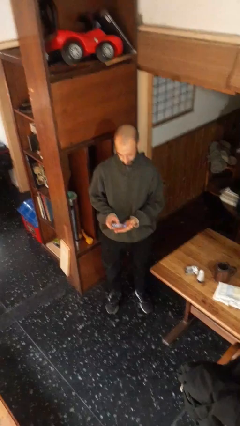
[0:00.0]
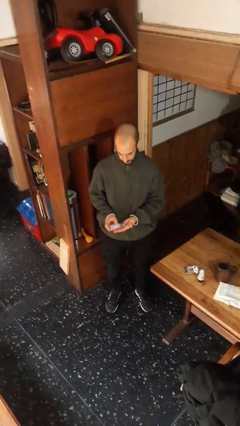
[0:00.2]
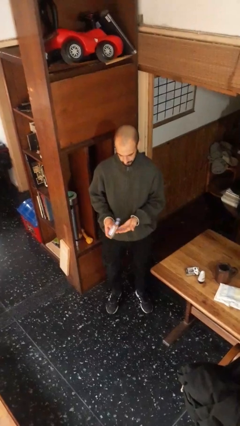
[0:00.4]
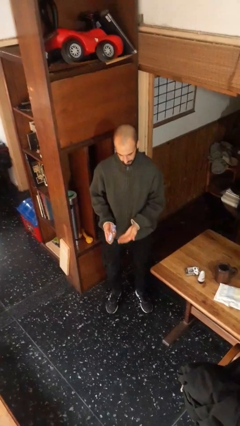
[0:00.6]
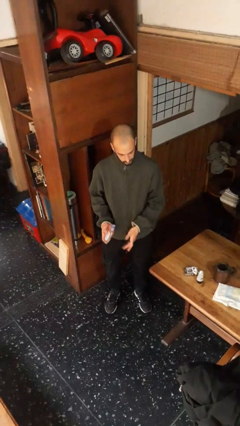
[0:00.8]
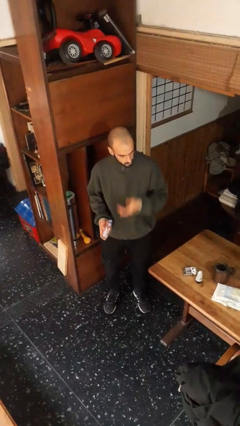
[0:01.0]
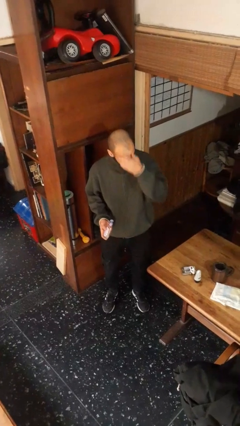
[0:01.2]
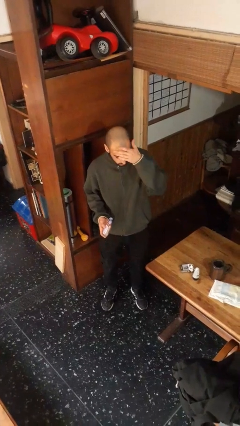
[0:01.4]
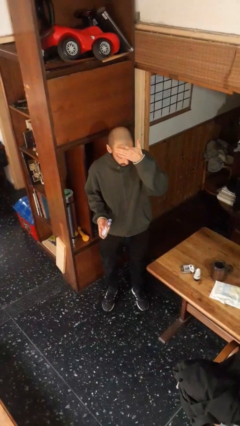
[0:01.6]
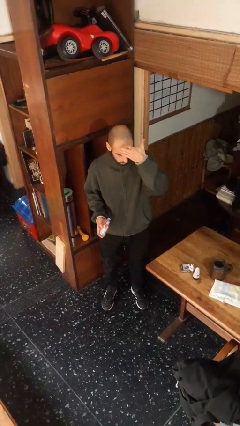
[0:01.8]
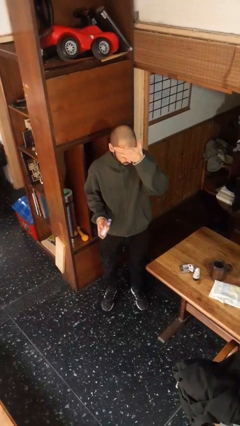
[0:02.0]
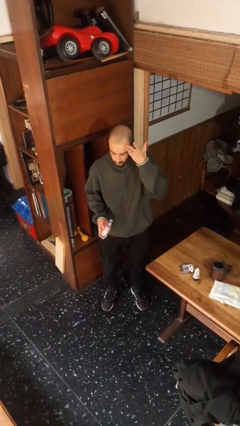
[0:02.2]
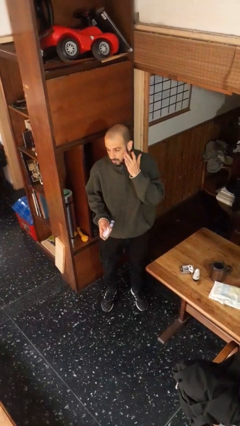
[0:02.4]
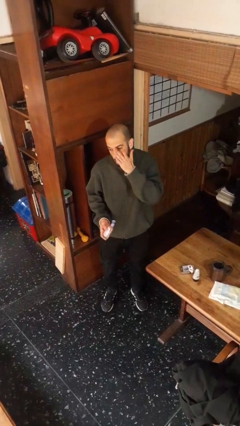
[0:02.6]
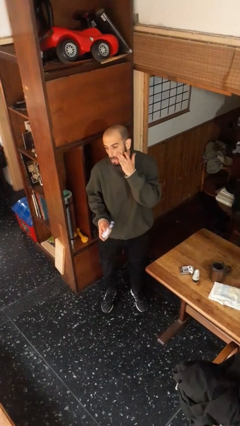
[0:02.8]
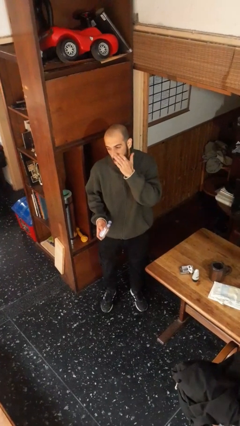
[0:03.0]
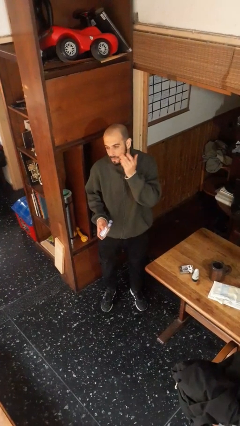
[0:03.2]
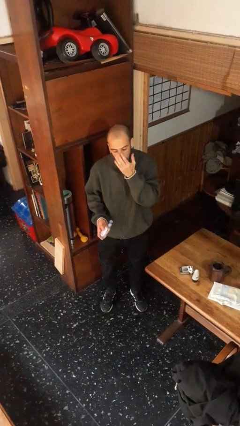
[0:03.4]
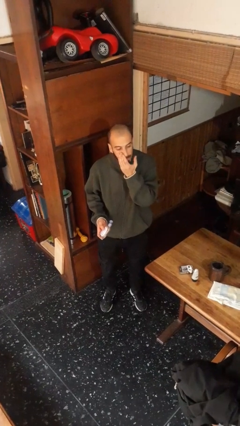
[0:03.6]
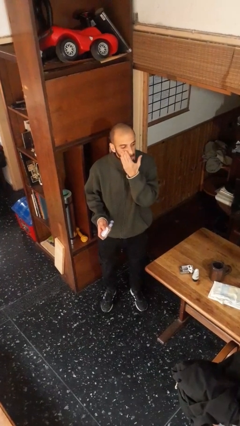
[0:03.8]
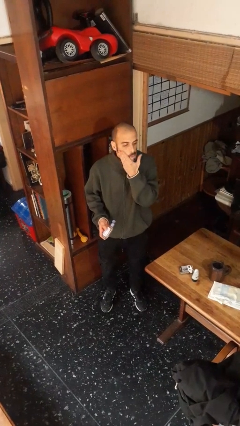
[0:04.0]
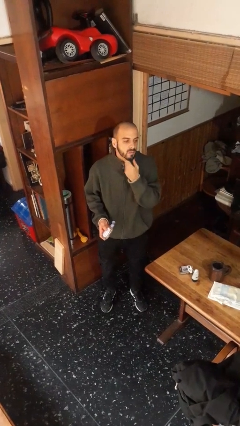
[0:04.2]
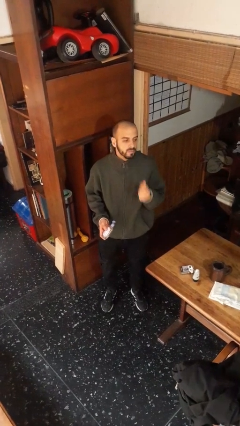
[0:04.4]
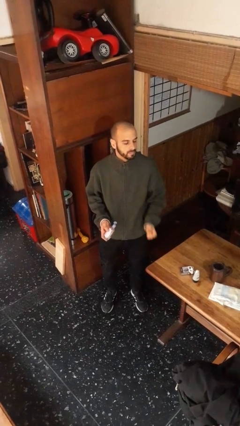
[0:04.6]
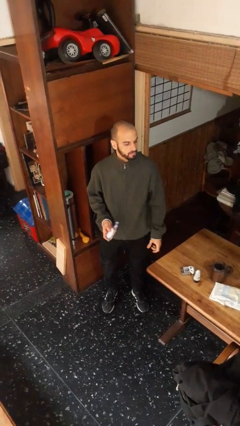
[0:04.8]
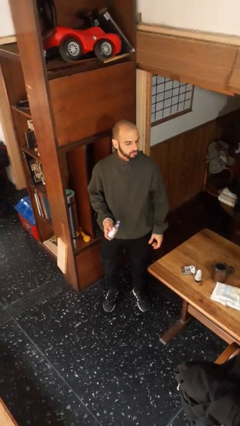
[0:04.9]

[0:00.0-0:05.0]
person applies facial moisturizer

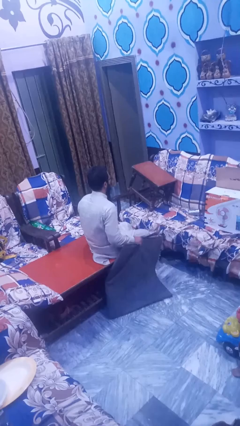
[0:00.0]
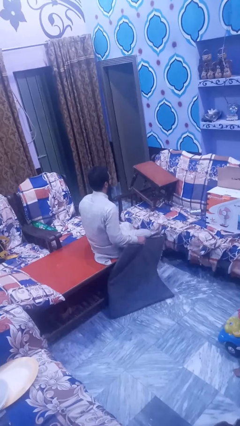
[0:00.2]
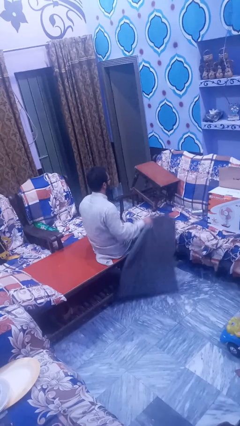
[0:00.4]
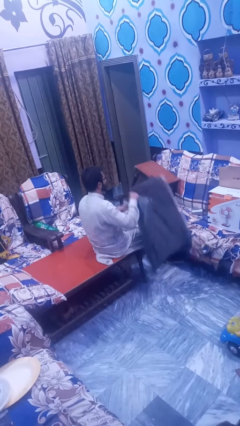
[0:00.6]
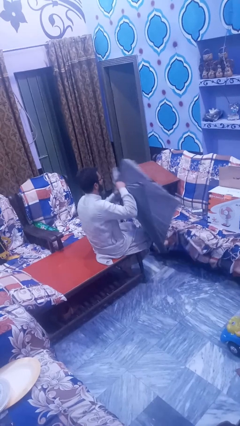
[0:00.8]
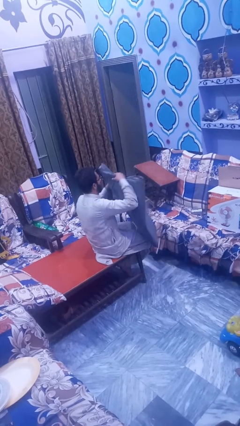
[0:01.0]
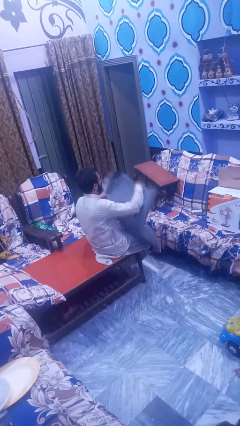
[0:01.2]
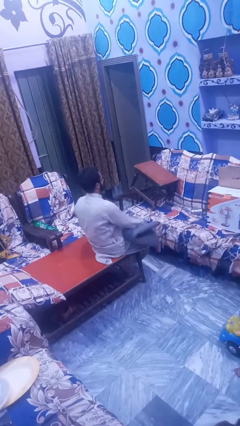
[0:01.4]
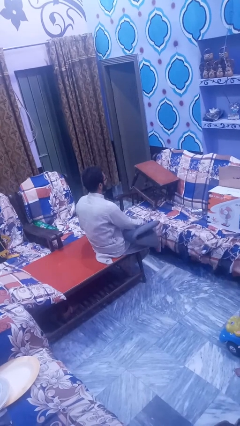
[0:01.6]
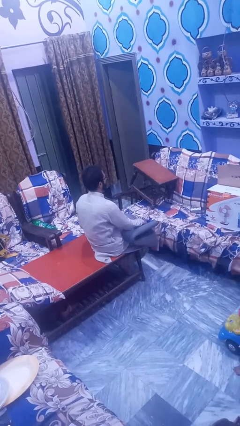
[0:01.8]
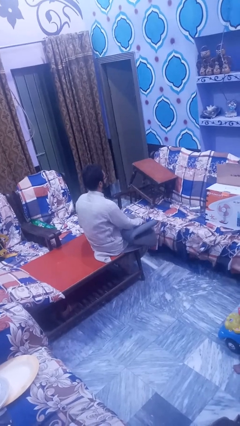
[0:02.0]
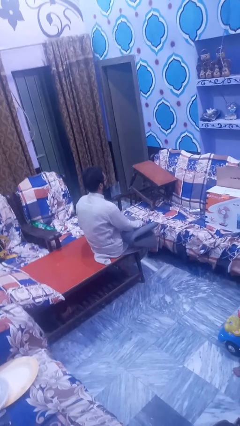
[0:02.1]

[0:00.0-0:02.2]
person folds blanket

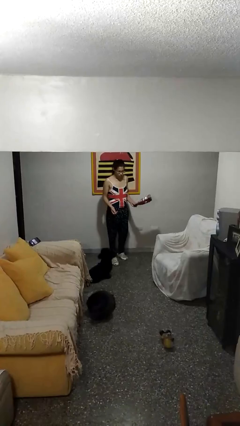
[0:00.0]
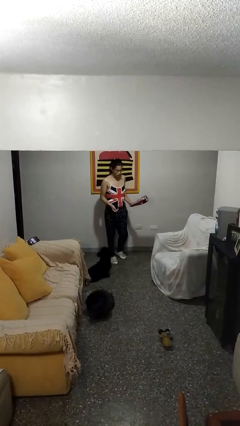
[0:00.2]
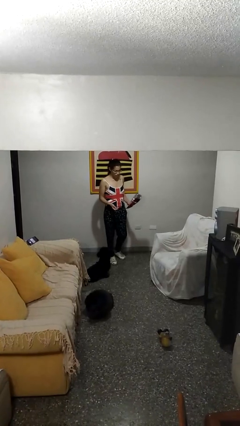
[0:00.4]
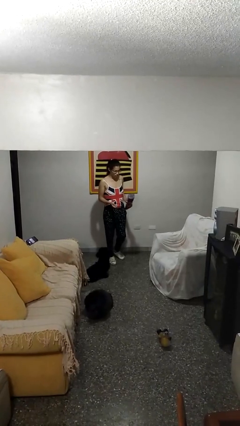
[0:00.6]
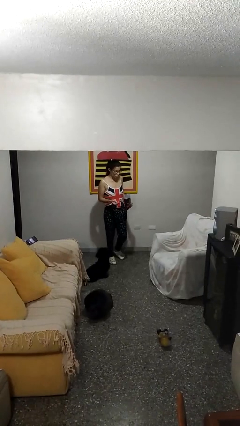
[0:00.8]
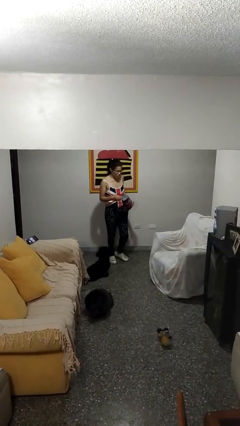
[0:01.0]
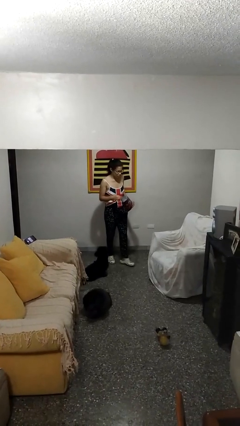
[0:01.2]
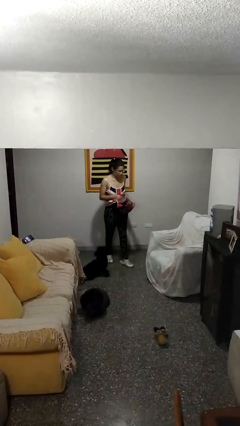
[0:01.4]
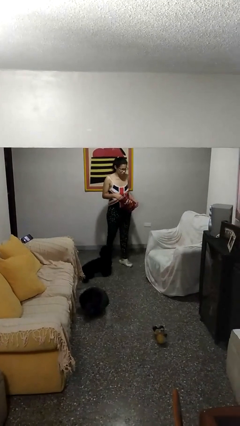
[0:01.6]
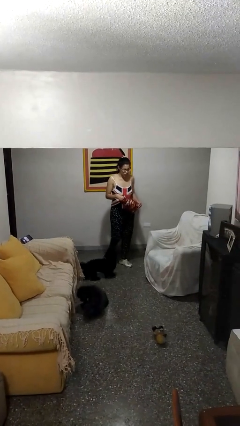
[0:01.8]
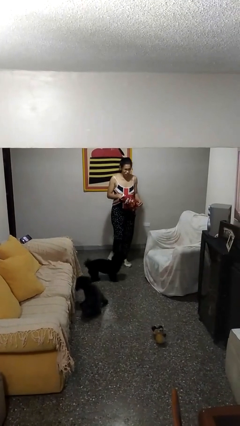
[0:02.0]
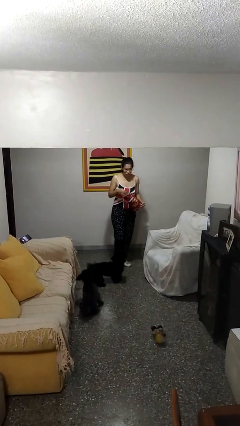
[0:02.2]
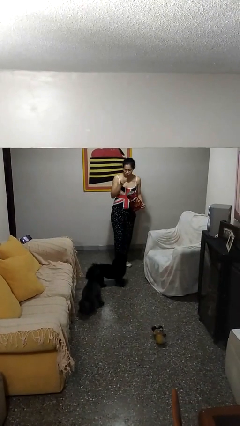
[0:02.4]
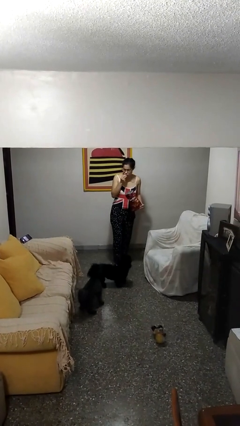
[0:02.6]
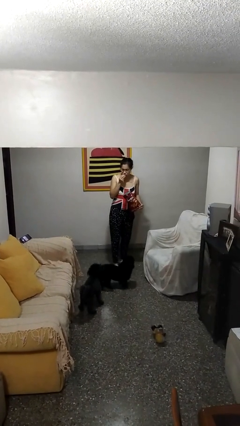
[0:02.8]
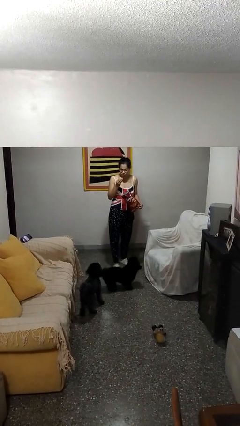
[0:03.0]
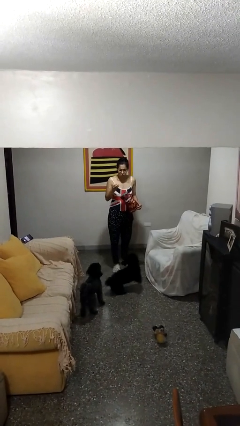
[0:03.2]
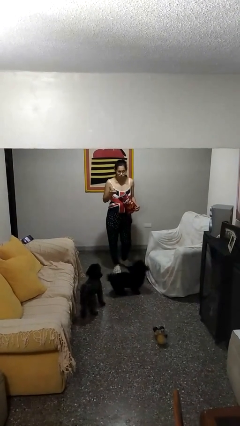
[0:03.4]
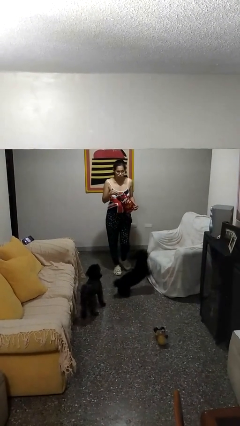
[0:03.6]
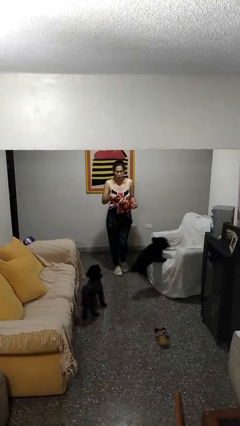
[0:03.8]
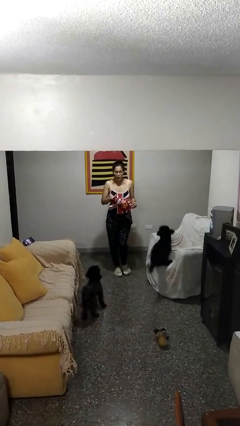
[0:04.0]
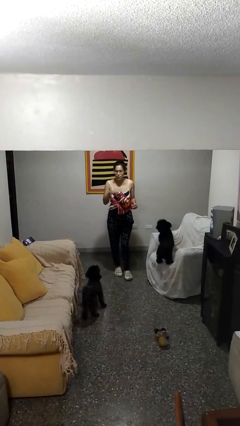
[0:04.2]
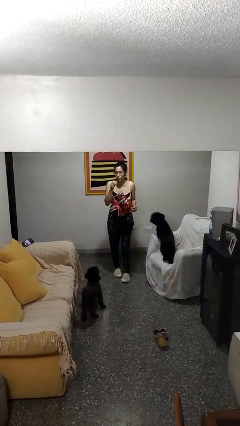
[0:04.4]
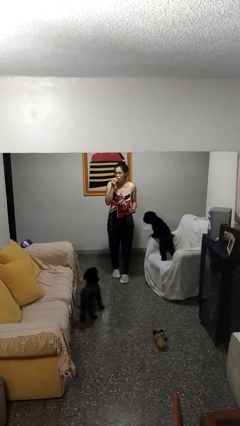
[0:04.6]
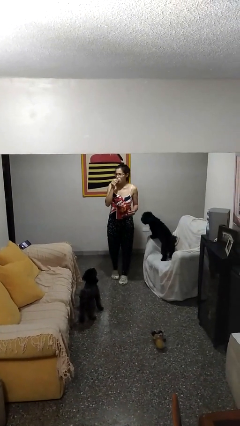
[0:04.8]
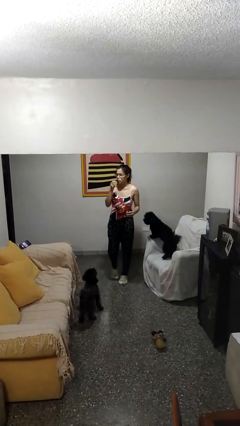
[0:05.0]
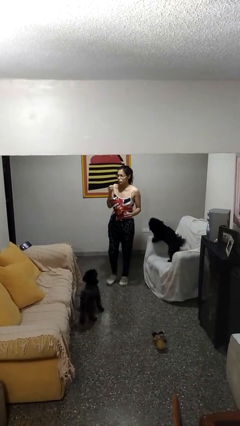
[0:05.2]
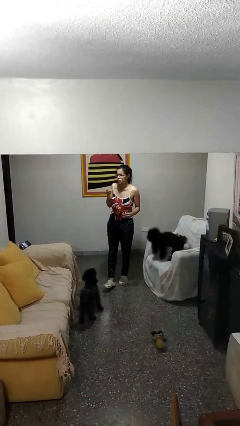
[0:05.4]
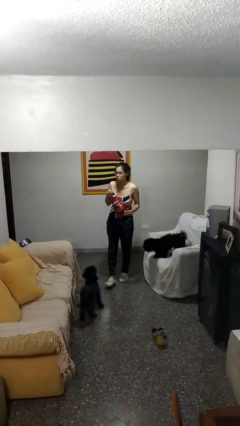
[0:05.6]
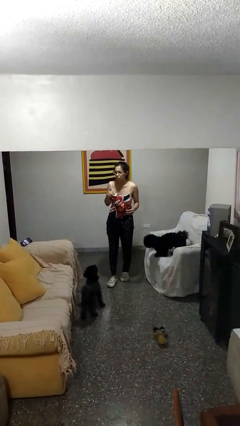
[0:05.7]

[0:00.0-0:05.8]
person eats snack from bag

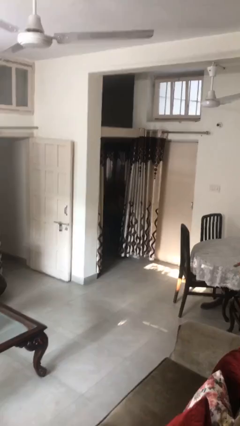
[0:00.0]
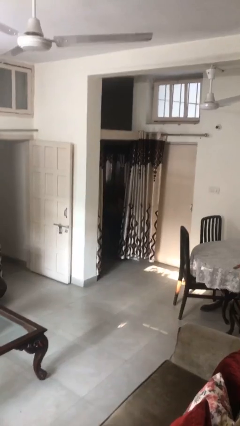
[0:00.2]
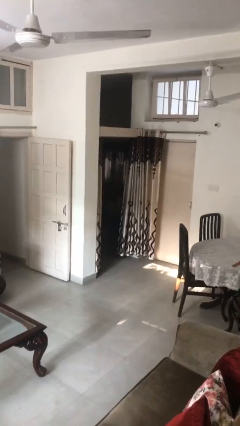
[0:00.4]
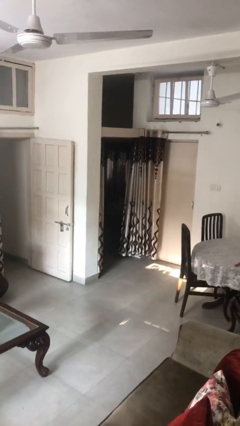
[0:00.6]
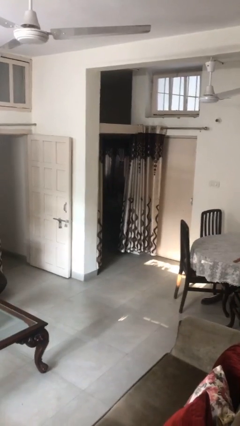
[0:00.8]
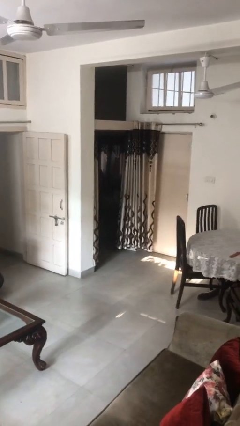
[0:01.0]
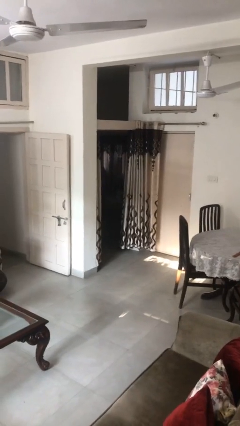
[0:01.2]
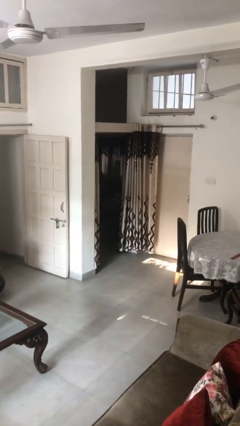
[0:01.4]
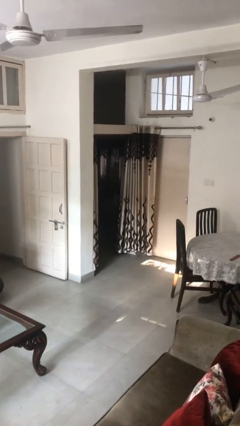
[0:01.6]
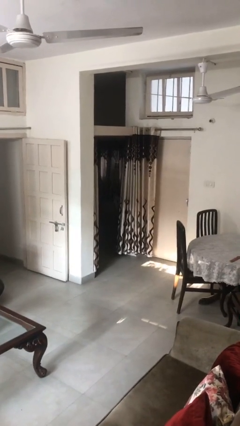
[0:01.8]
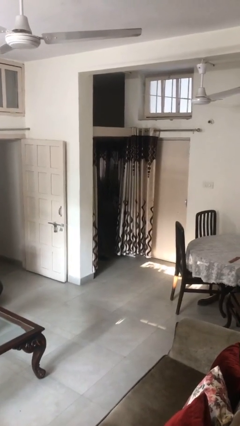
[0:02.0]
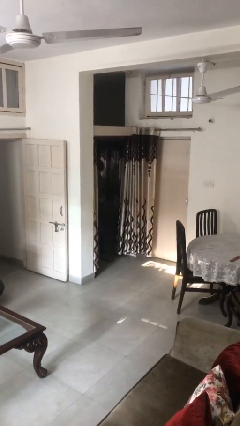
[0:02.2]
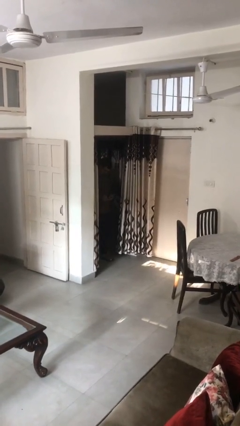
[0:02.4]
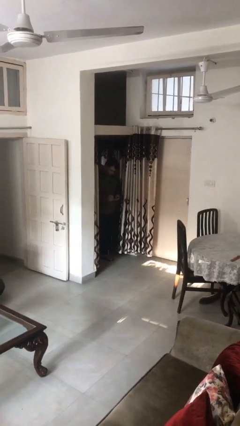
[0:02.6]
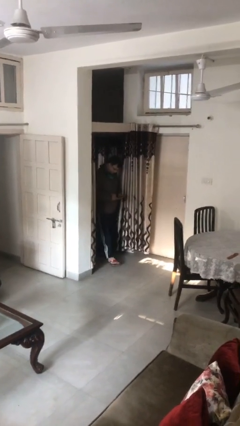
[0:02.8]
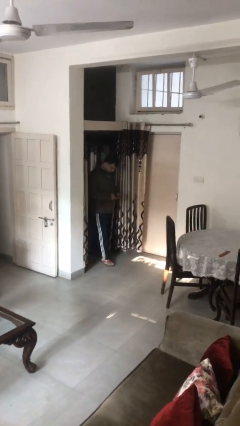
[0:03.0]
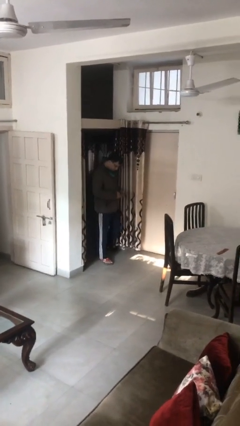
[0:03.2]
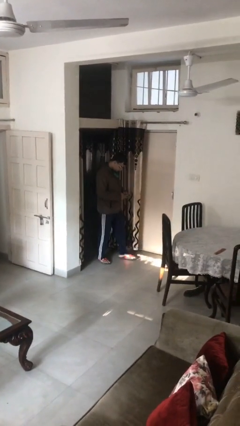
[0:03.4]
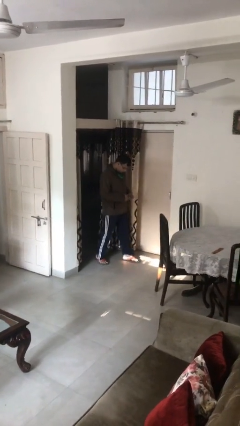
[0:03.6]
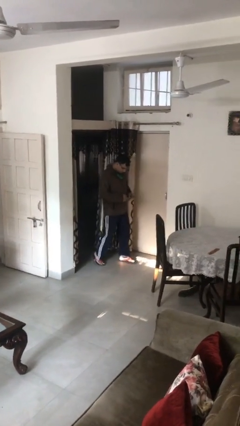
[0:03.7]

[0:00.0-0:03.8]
person enters scene through structure

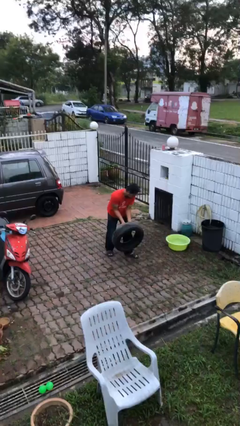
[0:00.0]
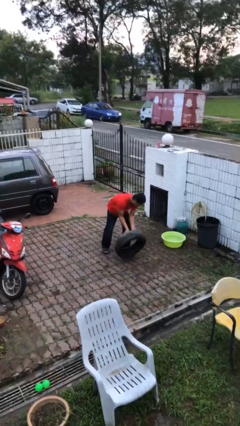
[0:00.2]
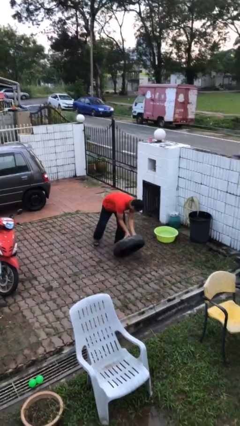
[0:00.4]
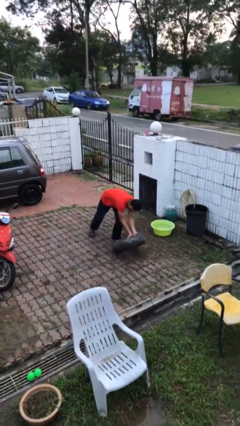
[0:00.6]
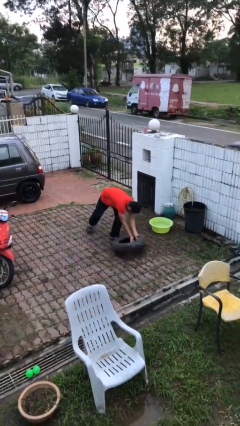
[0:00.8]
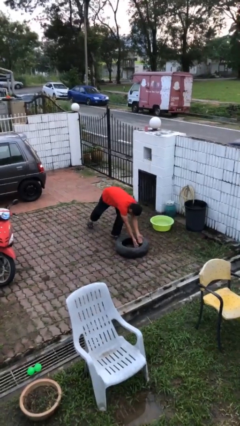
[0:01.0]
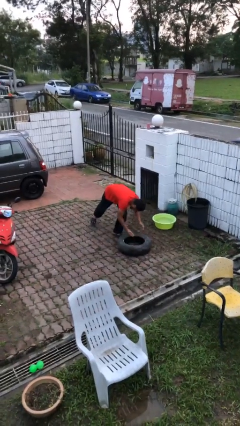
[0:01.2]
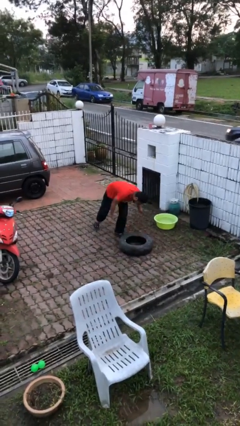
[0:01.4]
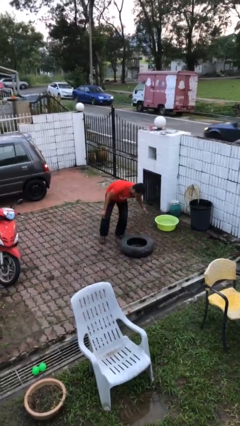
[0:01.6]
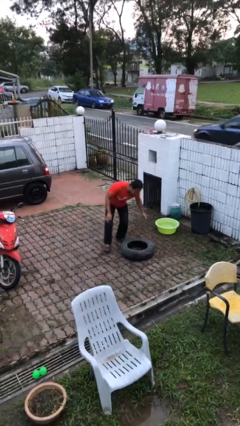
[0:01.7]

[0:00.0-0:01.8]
person puts down object on floor
